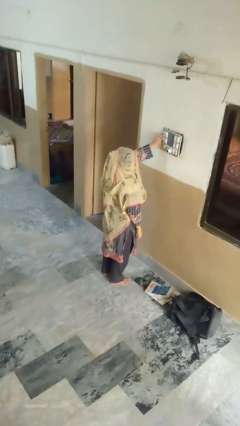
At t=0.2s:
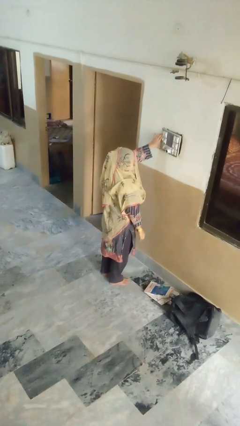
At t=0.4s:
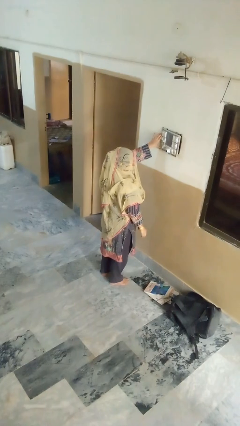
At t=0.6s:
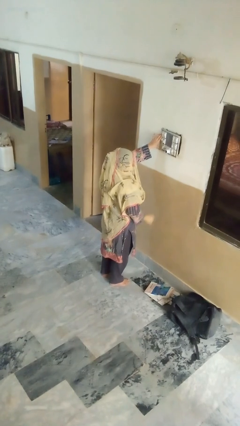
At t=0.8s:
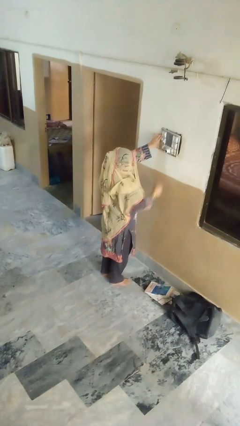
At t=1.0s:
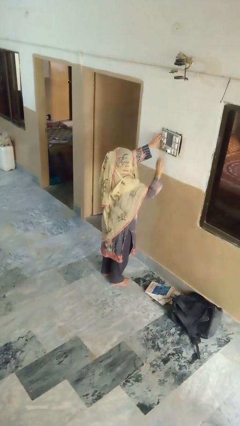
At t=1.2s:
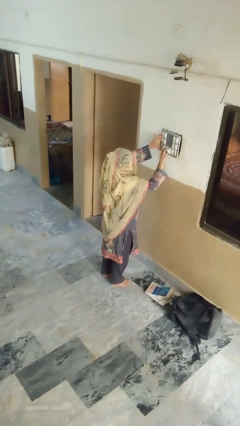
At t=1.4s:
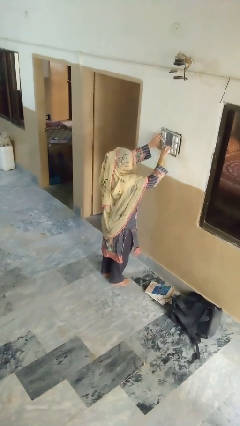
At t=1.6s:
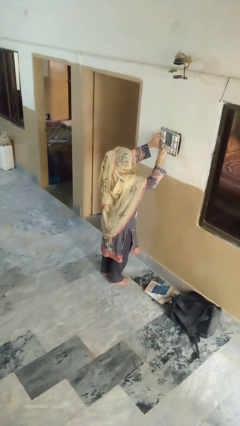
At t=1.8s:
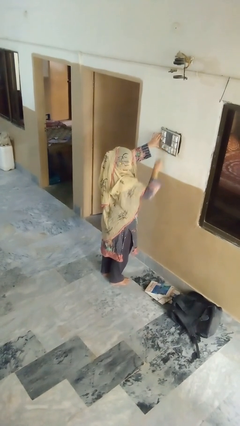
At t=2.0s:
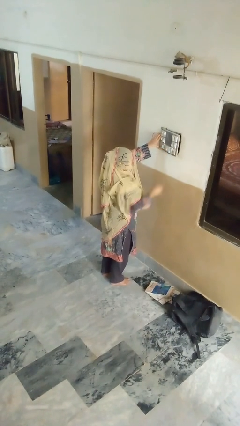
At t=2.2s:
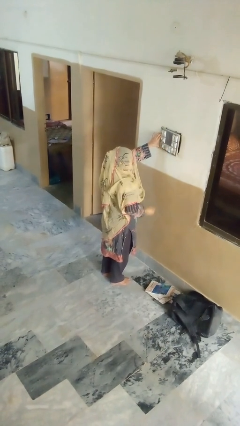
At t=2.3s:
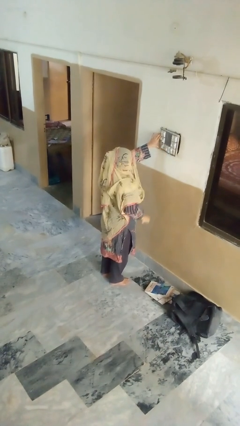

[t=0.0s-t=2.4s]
person unplugs from electrical socket

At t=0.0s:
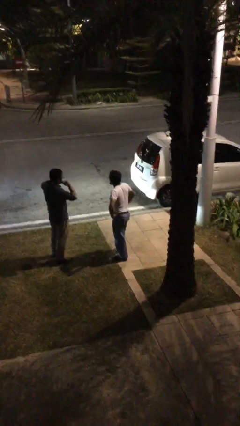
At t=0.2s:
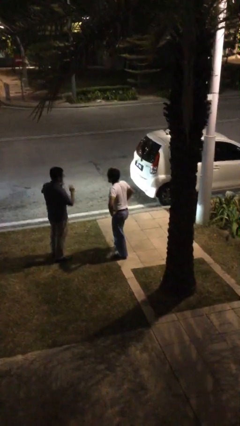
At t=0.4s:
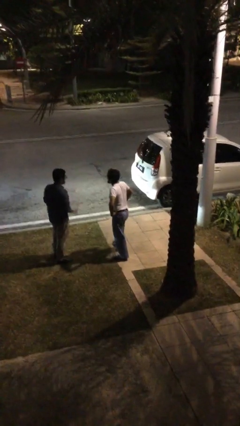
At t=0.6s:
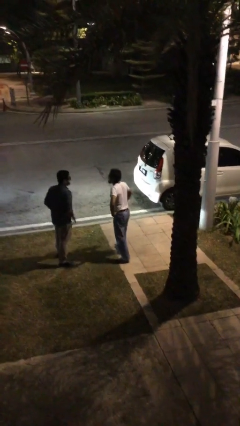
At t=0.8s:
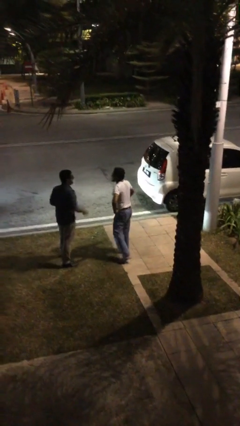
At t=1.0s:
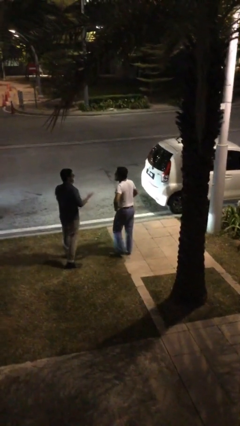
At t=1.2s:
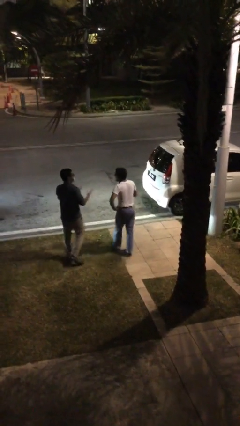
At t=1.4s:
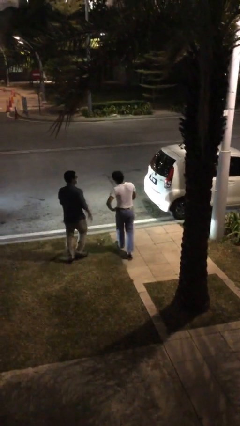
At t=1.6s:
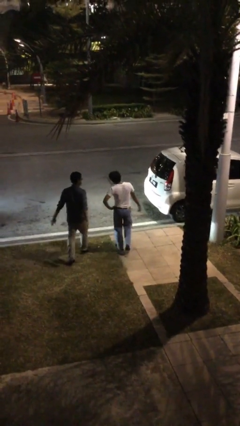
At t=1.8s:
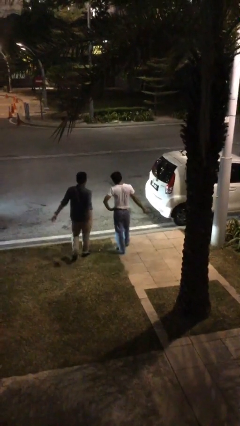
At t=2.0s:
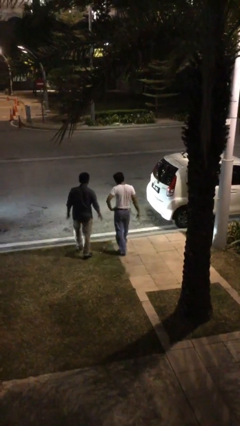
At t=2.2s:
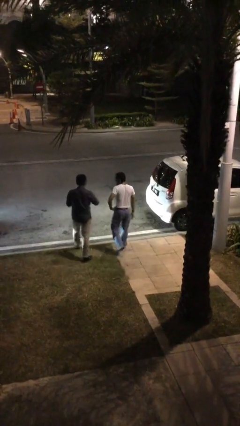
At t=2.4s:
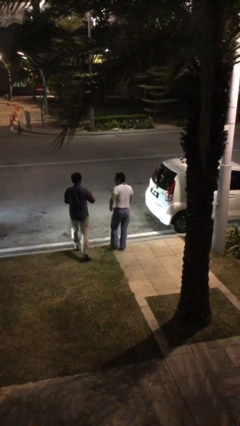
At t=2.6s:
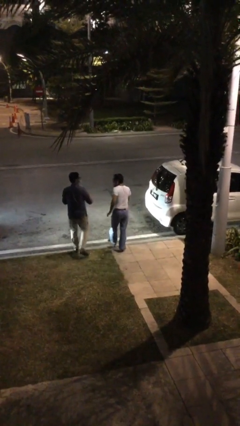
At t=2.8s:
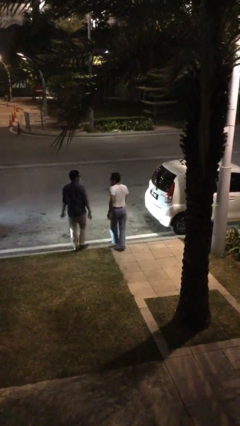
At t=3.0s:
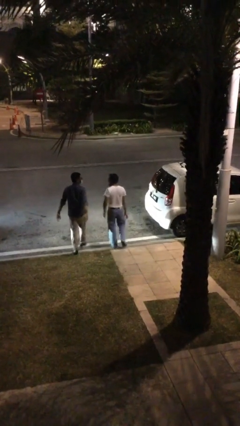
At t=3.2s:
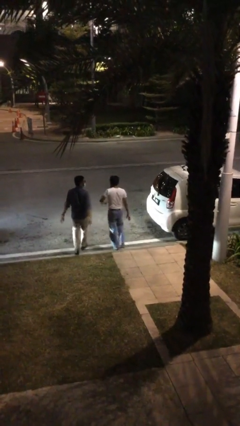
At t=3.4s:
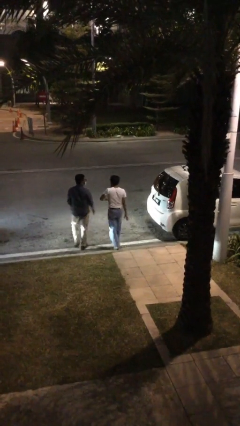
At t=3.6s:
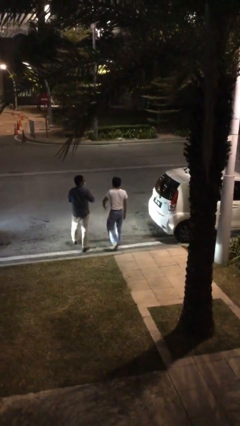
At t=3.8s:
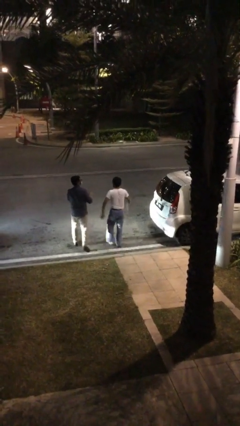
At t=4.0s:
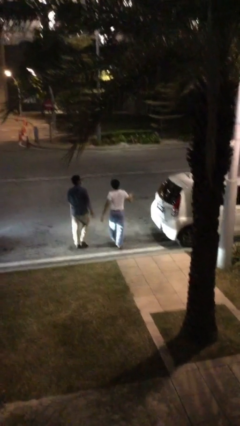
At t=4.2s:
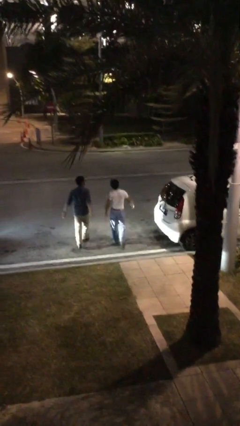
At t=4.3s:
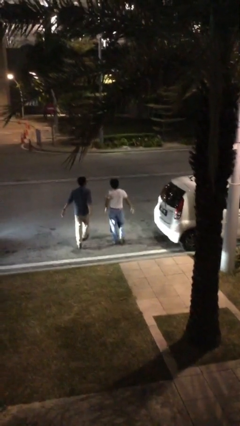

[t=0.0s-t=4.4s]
person talks to person

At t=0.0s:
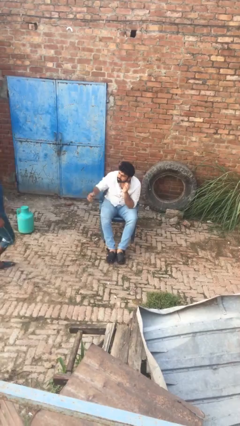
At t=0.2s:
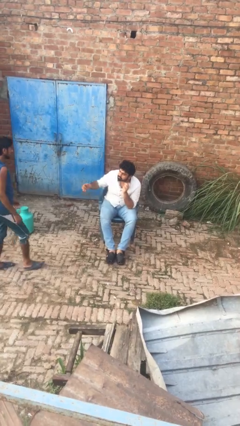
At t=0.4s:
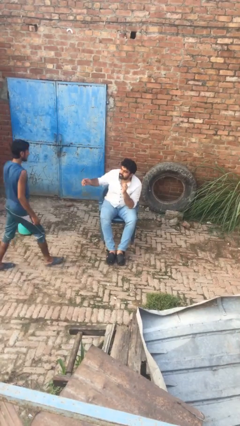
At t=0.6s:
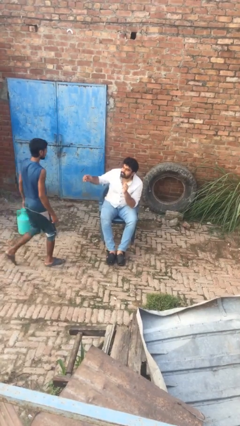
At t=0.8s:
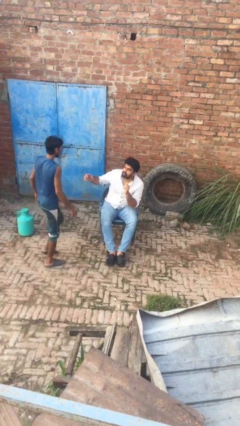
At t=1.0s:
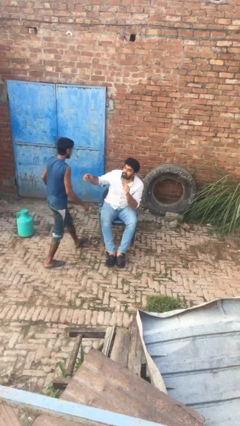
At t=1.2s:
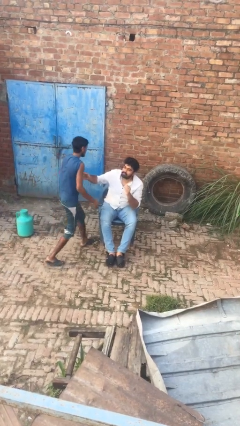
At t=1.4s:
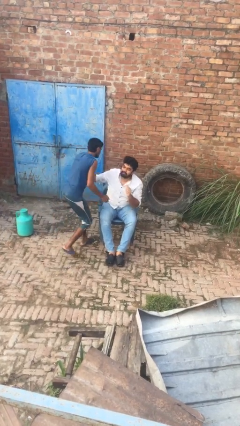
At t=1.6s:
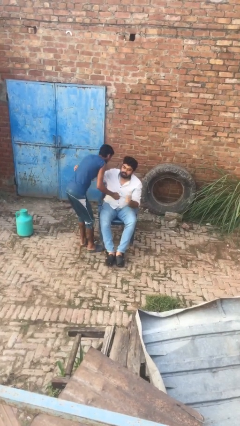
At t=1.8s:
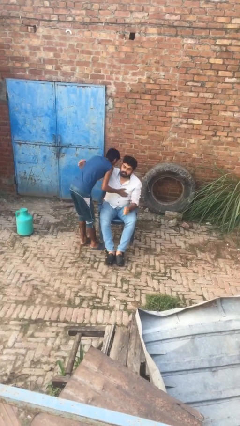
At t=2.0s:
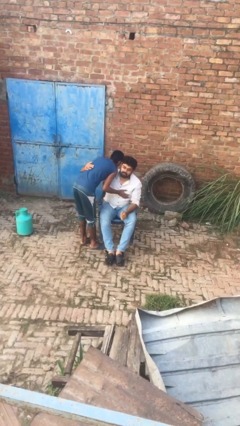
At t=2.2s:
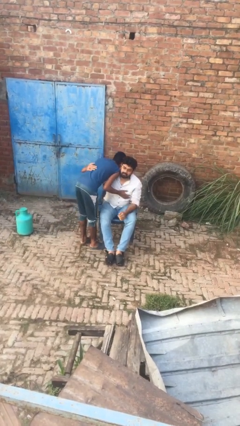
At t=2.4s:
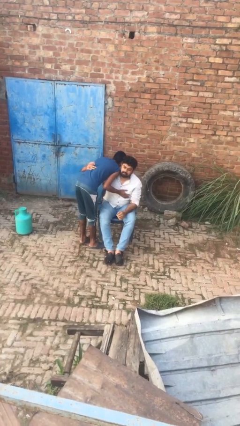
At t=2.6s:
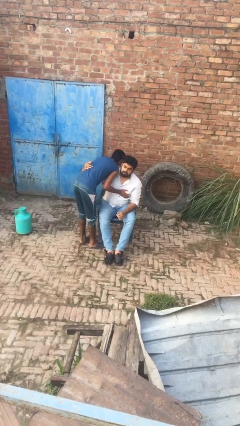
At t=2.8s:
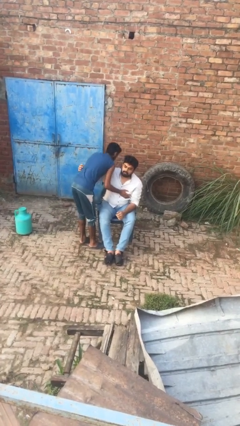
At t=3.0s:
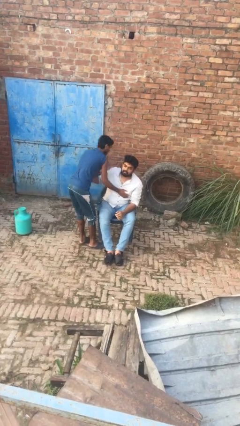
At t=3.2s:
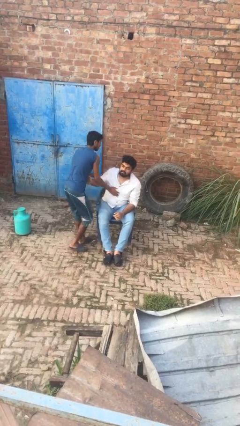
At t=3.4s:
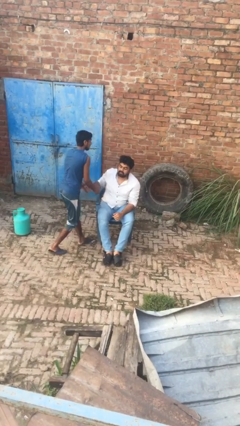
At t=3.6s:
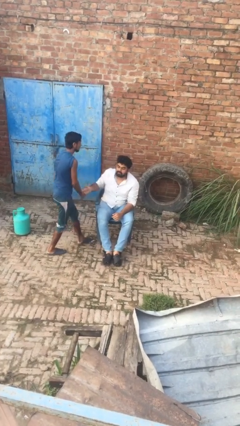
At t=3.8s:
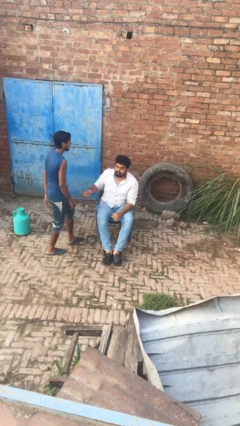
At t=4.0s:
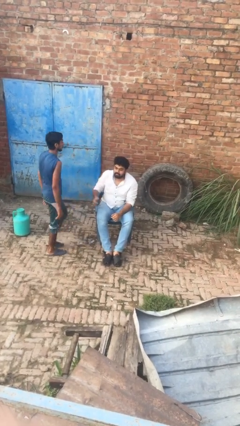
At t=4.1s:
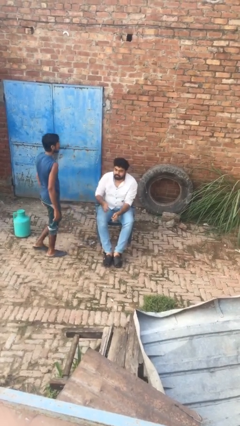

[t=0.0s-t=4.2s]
person embraces person

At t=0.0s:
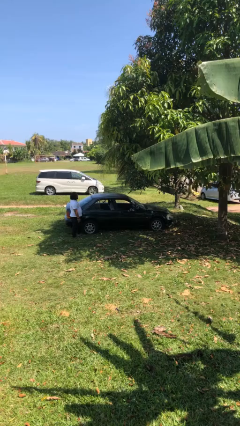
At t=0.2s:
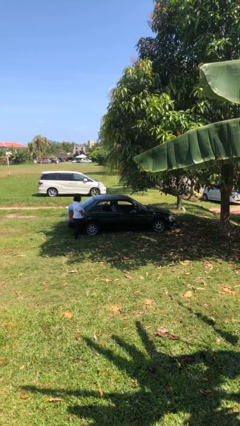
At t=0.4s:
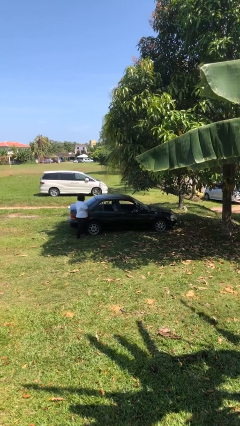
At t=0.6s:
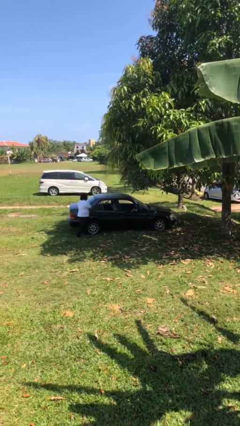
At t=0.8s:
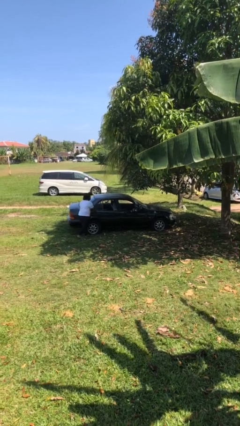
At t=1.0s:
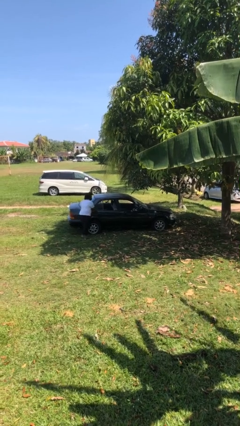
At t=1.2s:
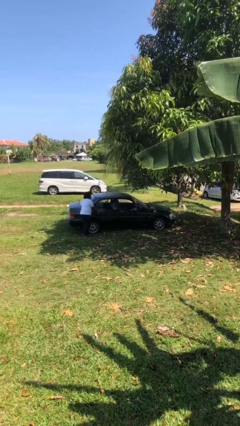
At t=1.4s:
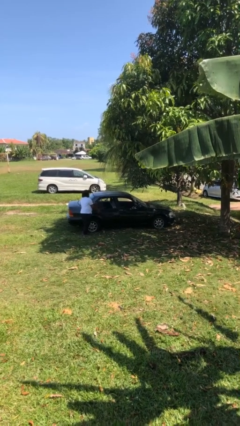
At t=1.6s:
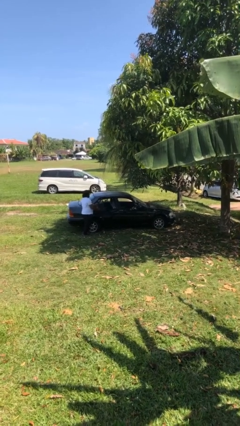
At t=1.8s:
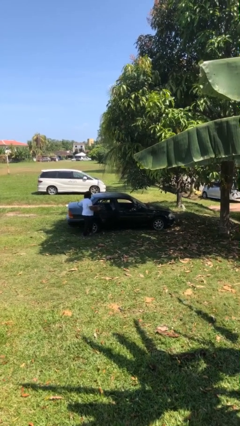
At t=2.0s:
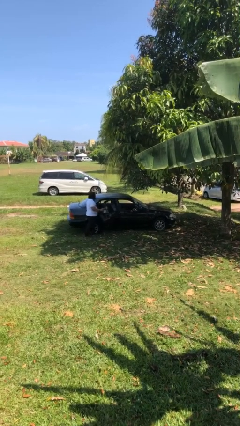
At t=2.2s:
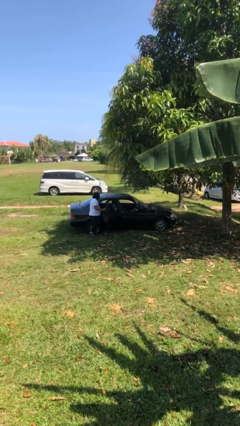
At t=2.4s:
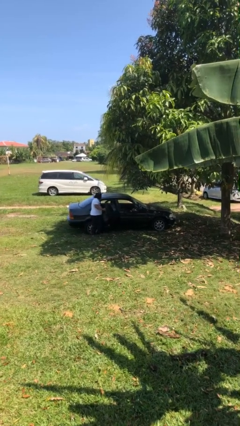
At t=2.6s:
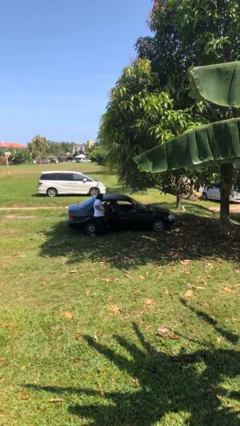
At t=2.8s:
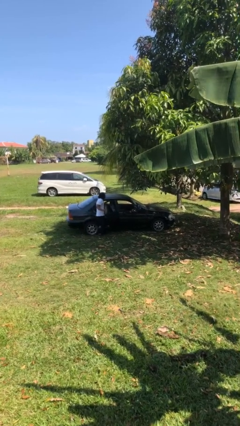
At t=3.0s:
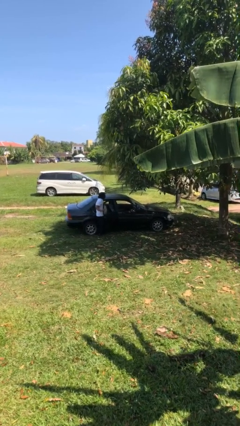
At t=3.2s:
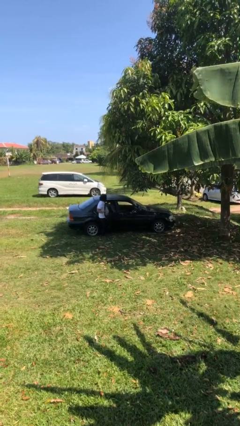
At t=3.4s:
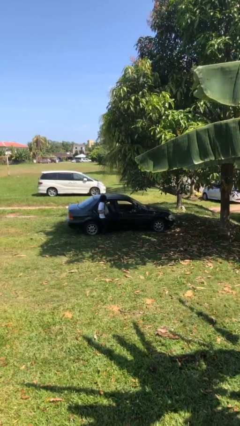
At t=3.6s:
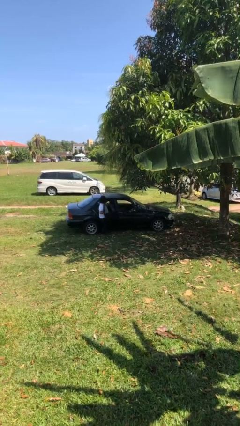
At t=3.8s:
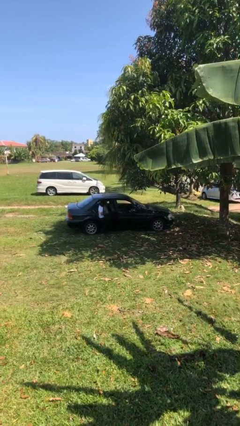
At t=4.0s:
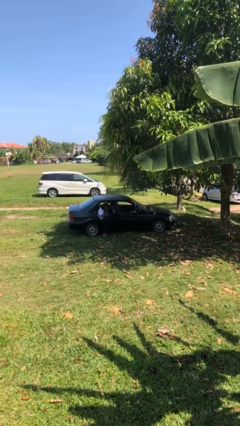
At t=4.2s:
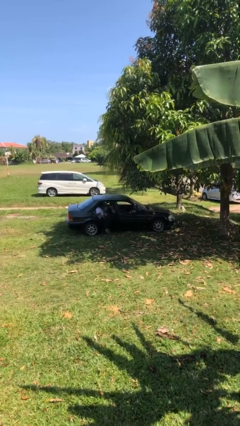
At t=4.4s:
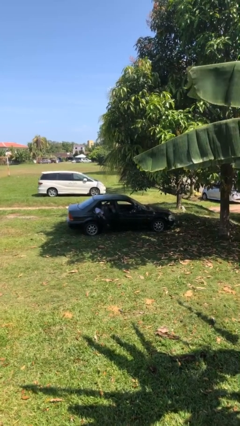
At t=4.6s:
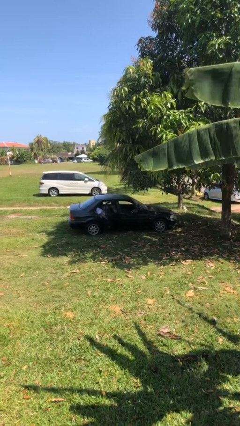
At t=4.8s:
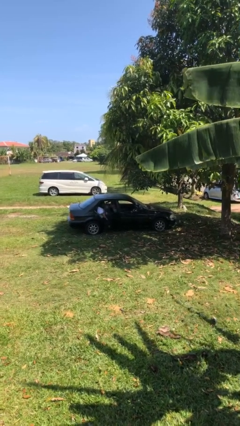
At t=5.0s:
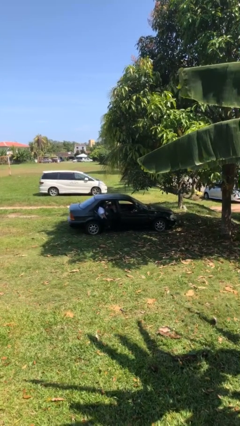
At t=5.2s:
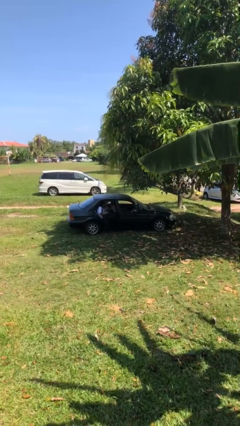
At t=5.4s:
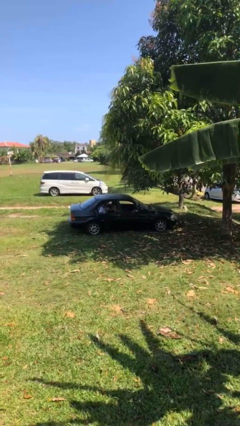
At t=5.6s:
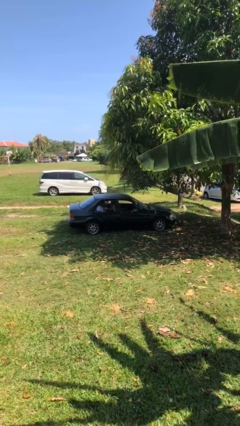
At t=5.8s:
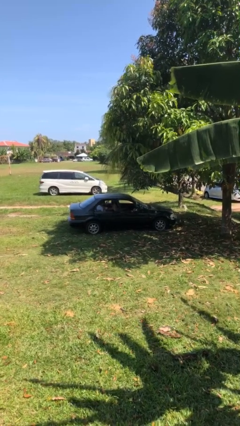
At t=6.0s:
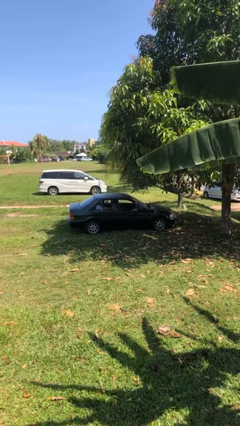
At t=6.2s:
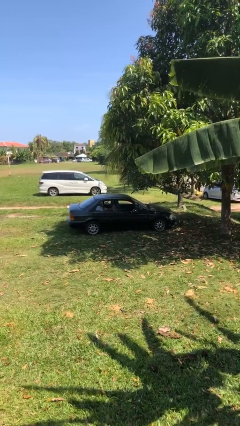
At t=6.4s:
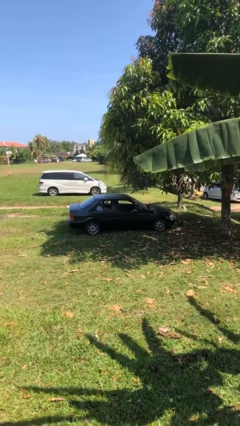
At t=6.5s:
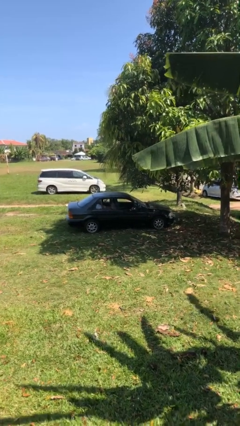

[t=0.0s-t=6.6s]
car picks up person
